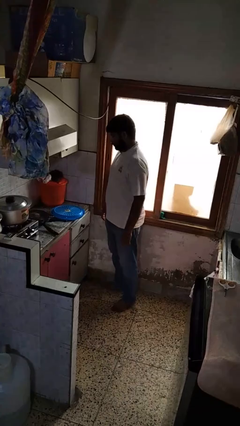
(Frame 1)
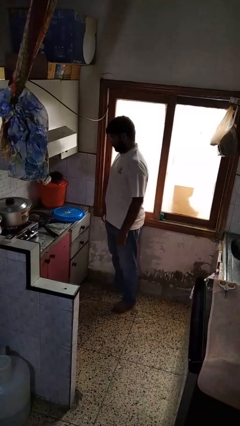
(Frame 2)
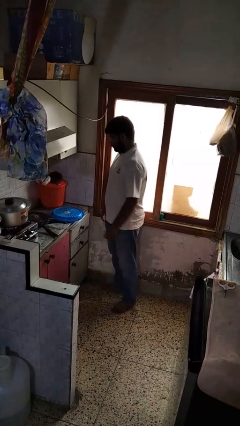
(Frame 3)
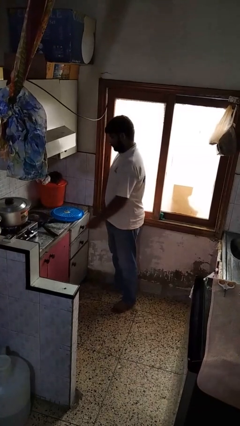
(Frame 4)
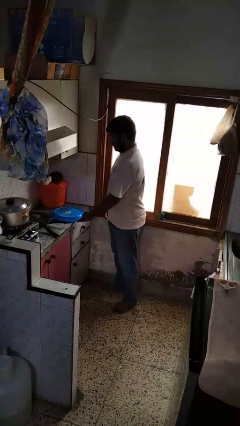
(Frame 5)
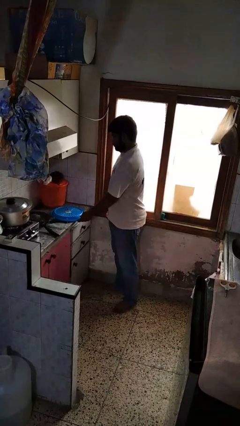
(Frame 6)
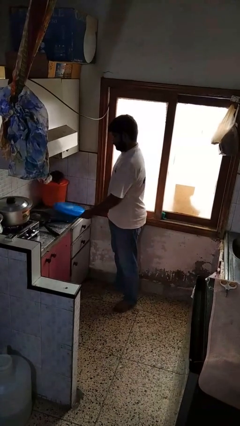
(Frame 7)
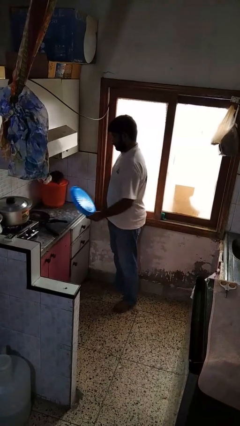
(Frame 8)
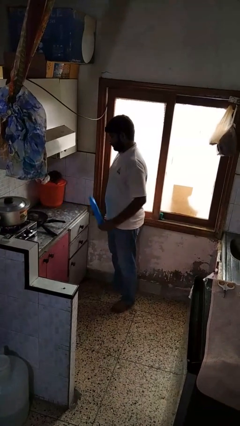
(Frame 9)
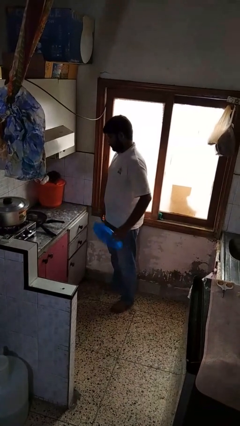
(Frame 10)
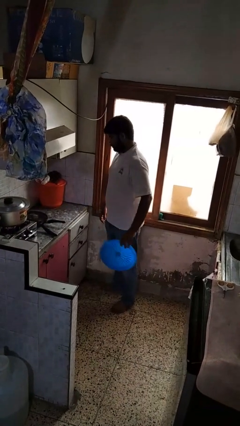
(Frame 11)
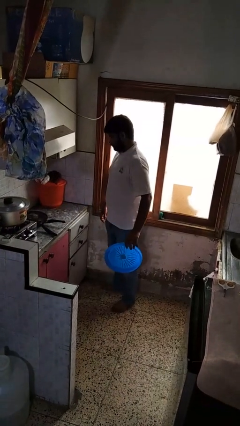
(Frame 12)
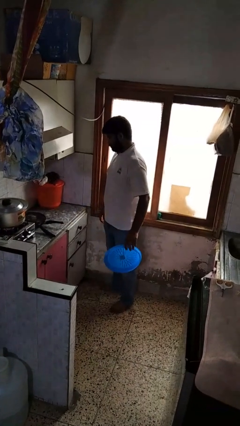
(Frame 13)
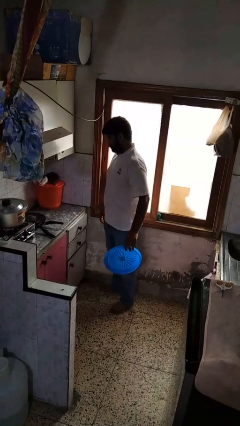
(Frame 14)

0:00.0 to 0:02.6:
person picks up object from countertop

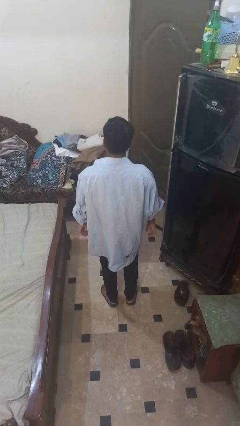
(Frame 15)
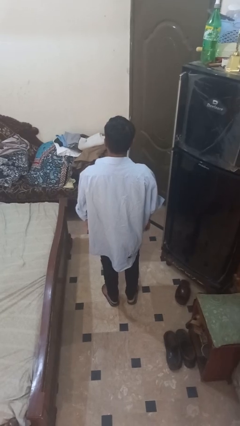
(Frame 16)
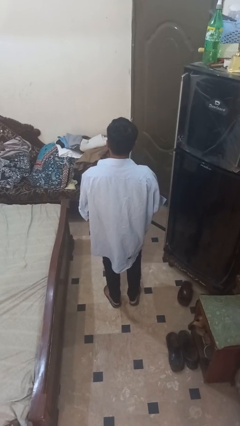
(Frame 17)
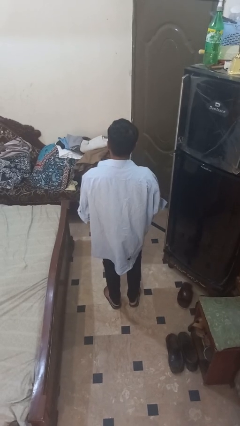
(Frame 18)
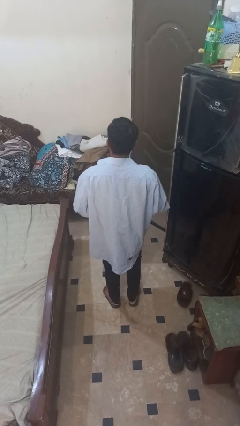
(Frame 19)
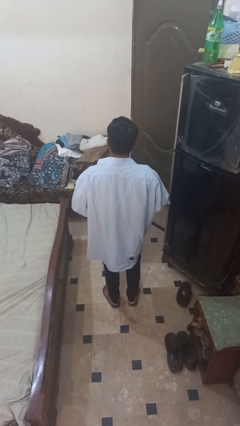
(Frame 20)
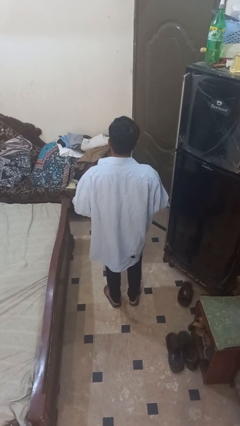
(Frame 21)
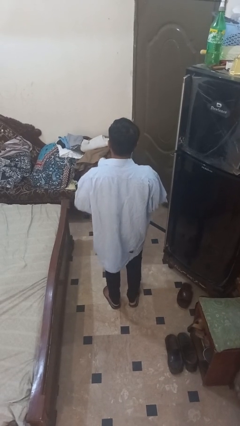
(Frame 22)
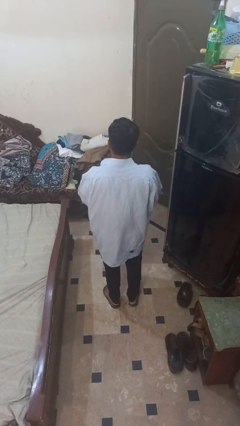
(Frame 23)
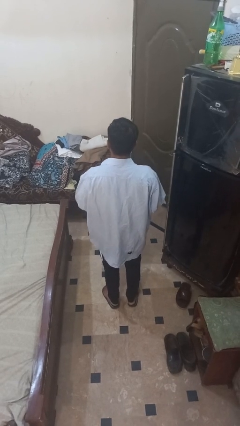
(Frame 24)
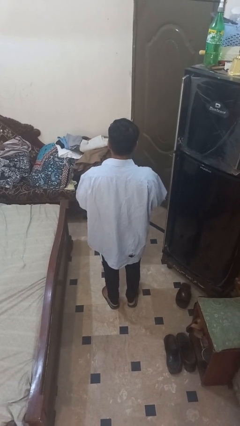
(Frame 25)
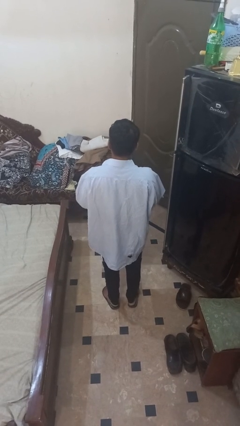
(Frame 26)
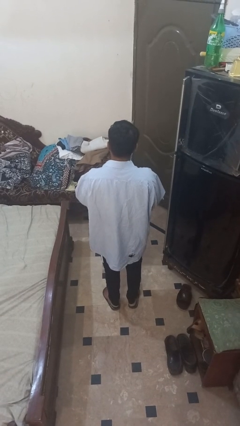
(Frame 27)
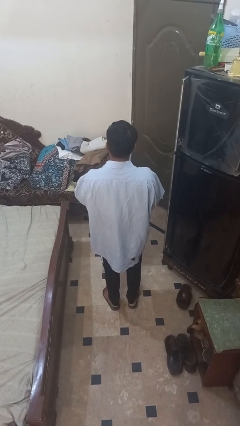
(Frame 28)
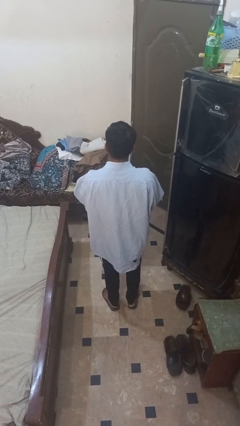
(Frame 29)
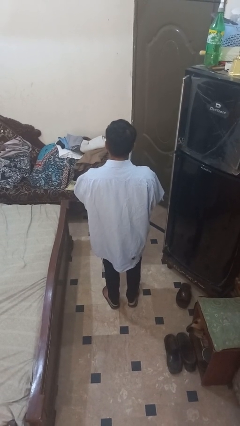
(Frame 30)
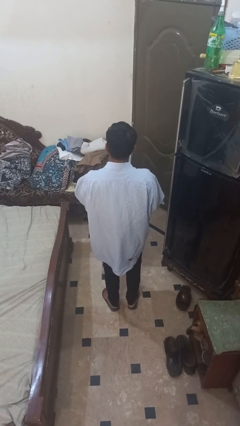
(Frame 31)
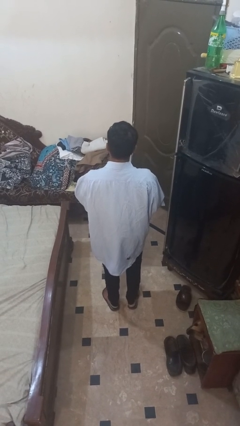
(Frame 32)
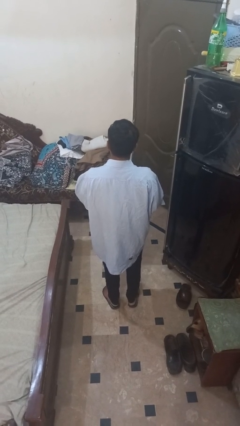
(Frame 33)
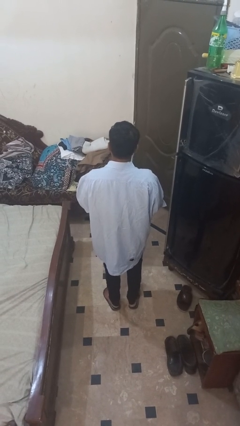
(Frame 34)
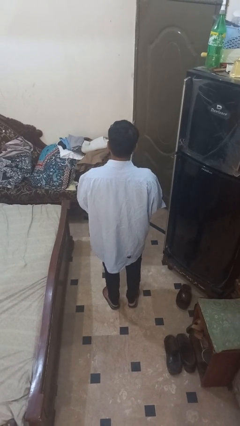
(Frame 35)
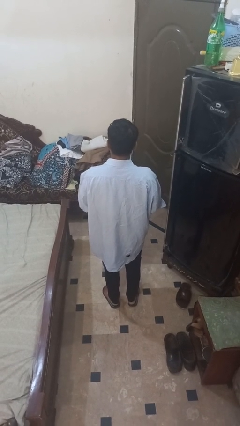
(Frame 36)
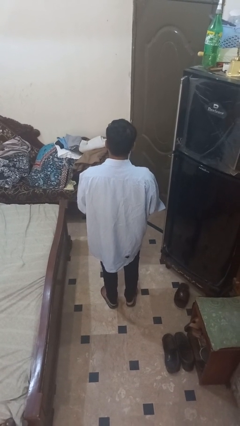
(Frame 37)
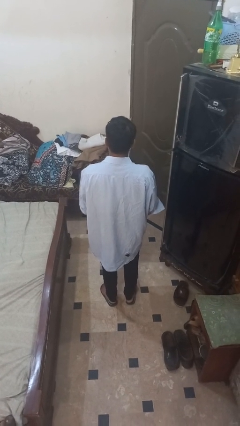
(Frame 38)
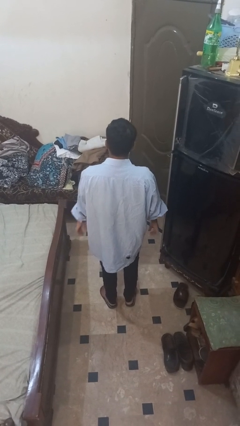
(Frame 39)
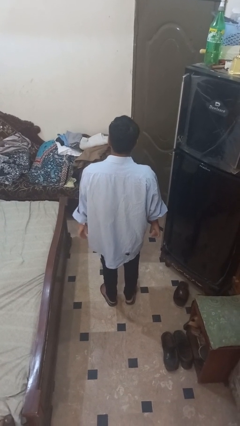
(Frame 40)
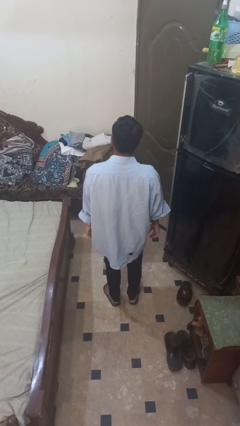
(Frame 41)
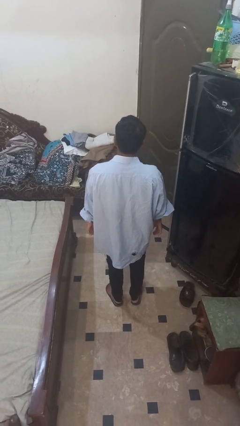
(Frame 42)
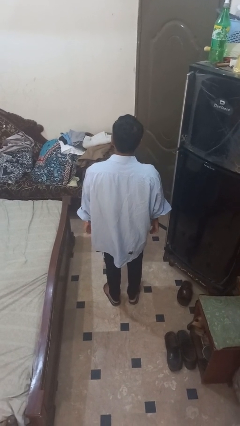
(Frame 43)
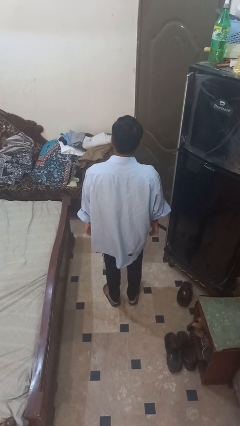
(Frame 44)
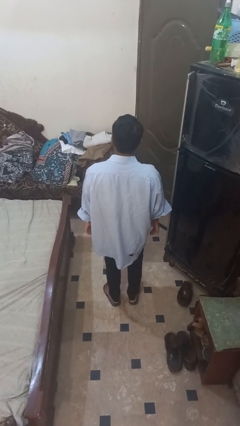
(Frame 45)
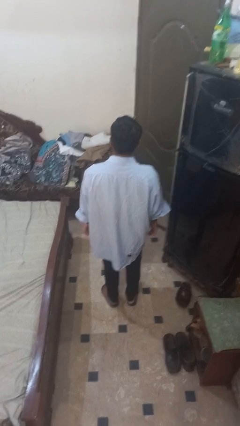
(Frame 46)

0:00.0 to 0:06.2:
person buttons shirt

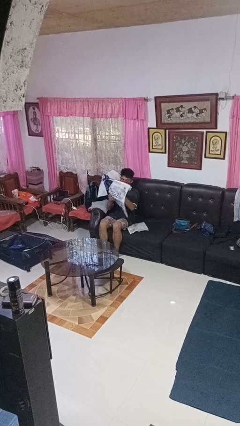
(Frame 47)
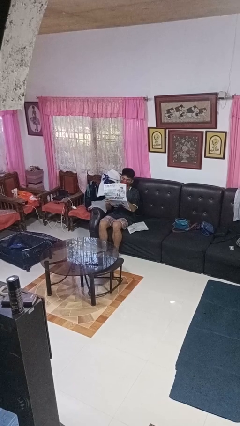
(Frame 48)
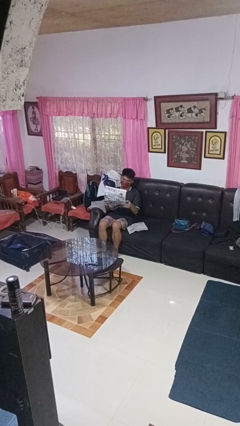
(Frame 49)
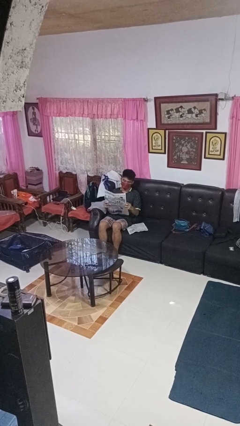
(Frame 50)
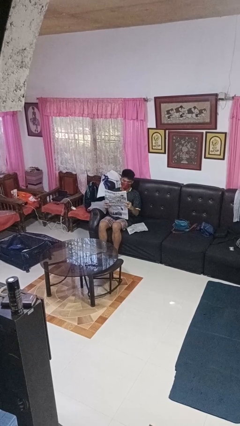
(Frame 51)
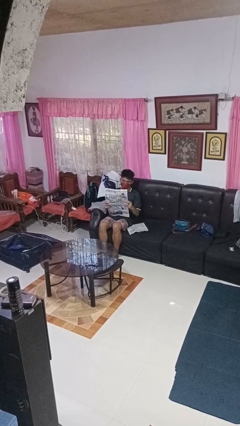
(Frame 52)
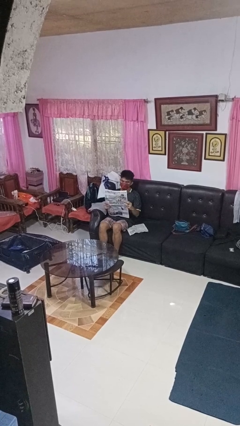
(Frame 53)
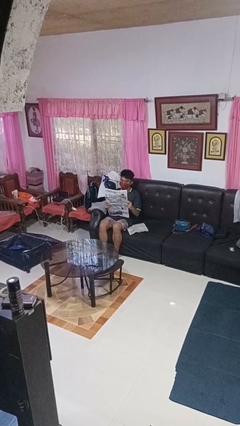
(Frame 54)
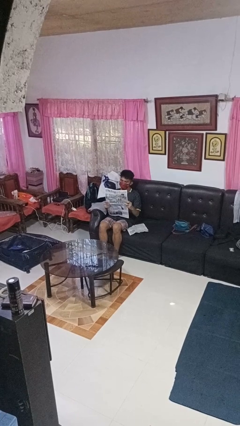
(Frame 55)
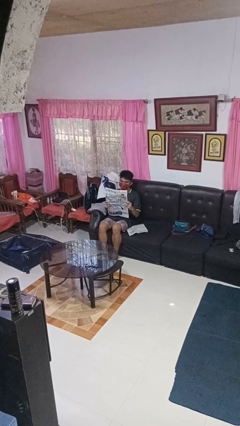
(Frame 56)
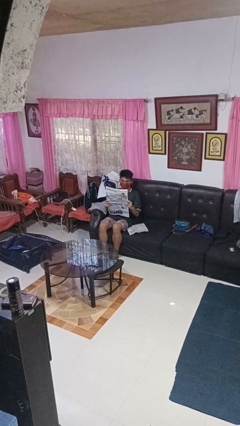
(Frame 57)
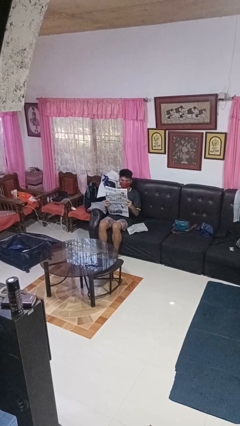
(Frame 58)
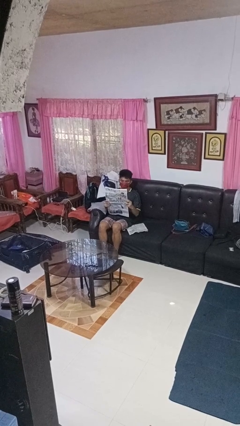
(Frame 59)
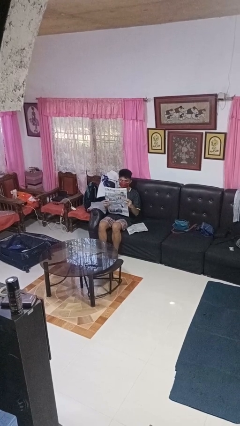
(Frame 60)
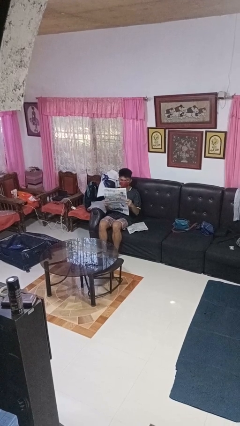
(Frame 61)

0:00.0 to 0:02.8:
person reads newspaper

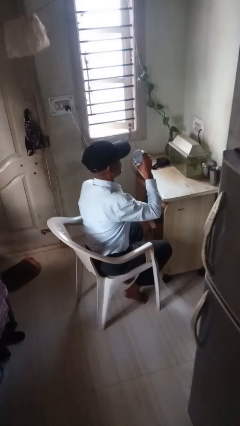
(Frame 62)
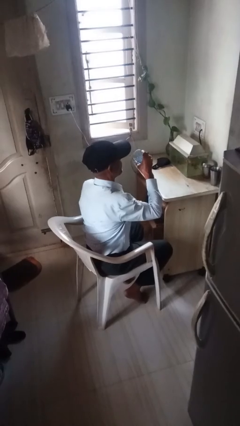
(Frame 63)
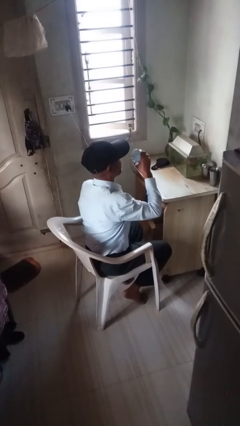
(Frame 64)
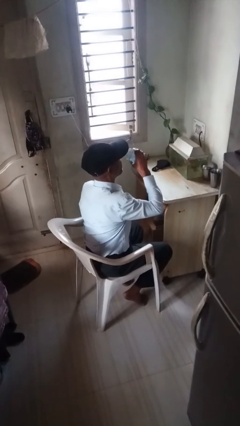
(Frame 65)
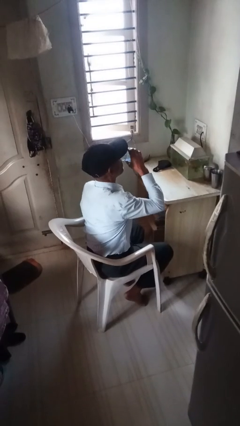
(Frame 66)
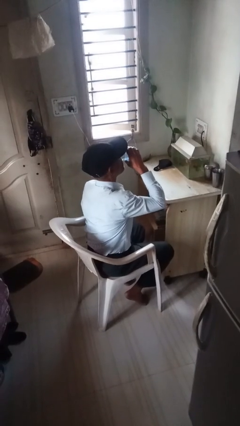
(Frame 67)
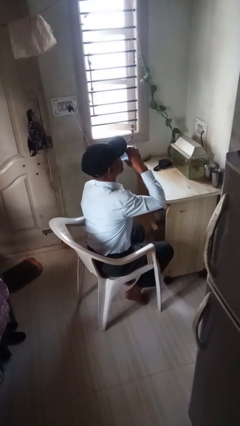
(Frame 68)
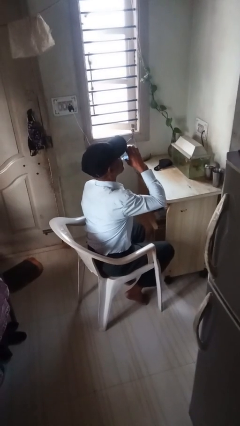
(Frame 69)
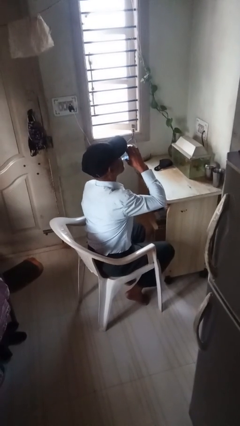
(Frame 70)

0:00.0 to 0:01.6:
person drinks from shotglass

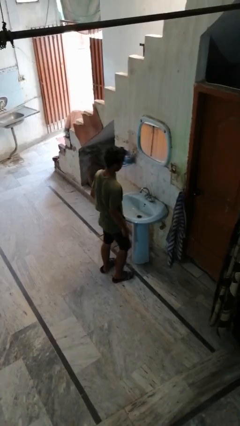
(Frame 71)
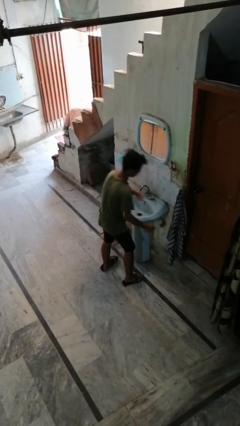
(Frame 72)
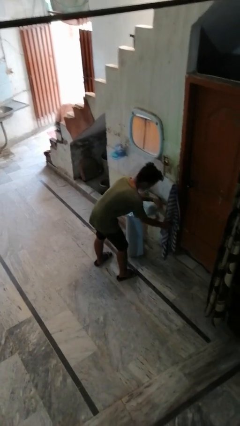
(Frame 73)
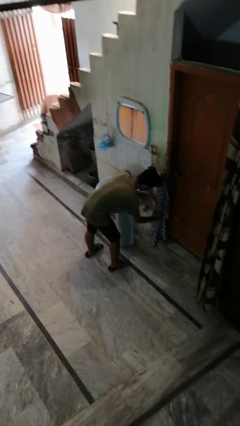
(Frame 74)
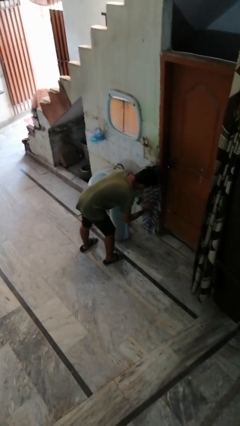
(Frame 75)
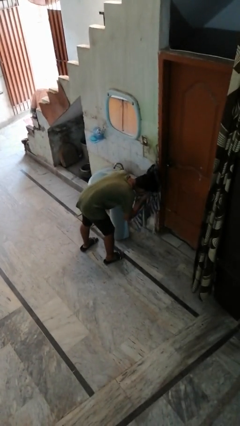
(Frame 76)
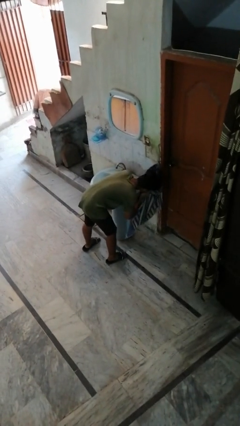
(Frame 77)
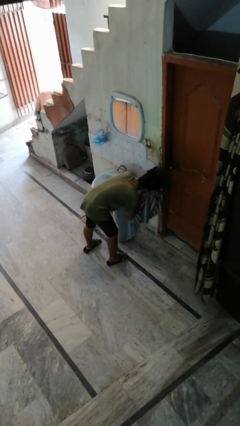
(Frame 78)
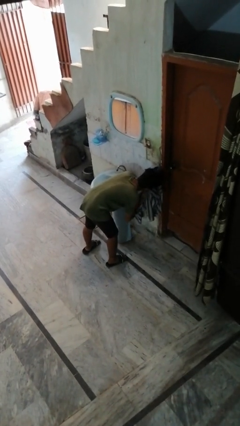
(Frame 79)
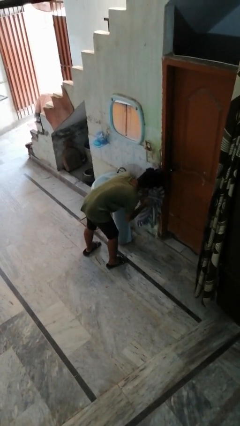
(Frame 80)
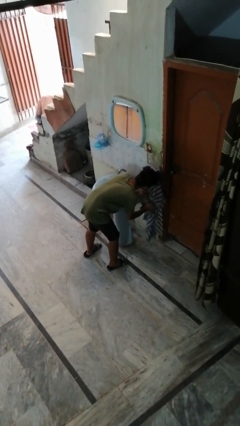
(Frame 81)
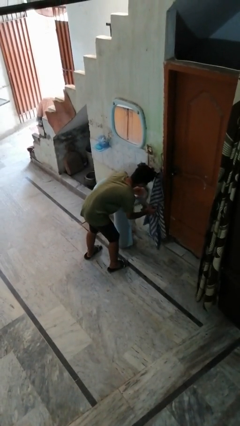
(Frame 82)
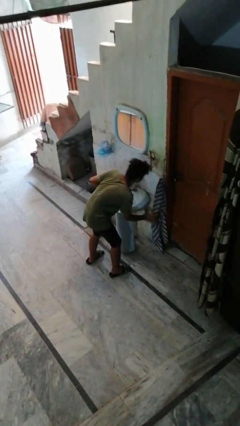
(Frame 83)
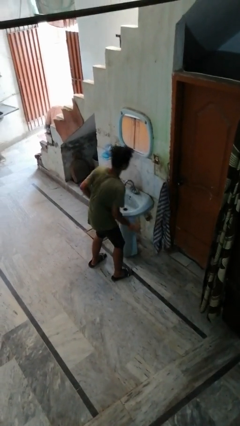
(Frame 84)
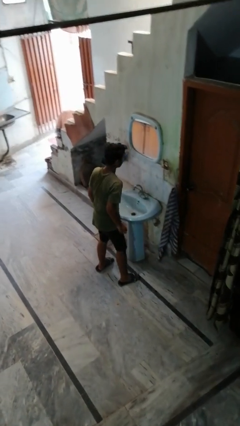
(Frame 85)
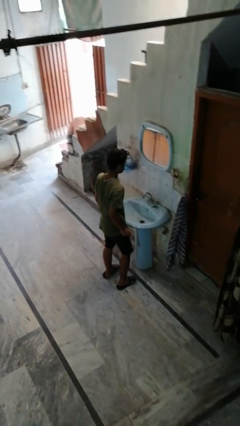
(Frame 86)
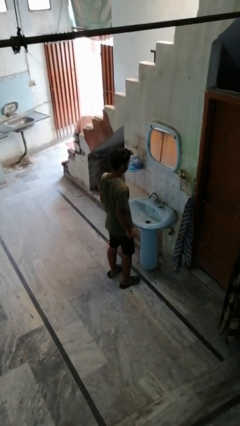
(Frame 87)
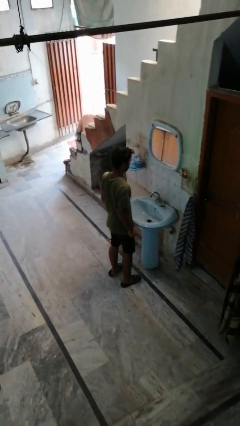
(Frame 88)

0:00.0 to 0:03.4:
person dries face with towel

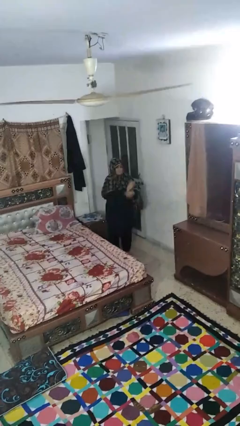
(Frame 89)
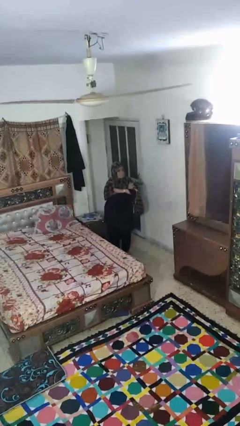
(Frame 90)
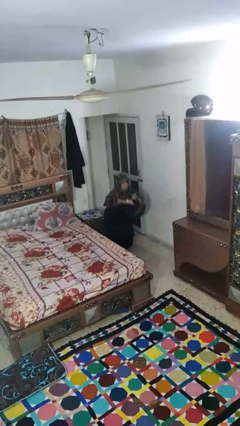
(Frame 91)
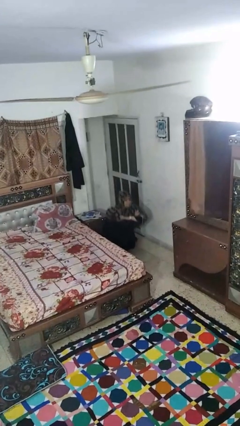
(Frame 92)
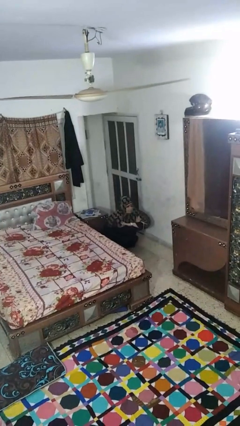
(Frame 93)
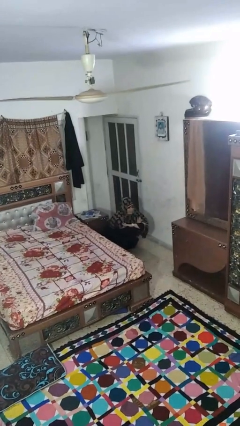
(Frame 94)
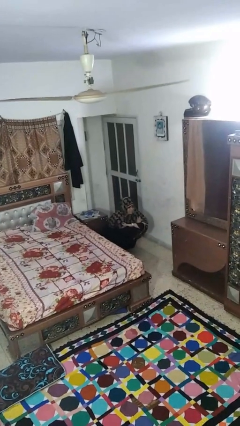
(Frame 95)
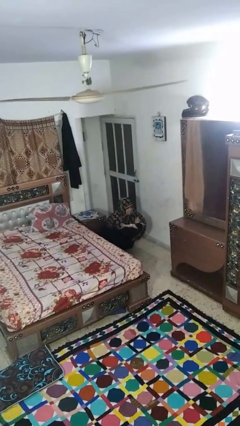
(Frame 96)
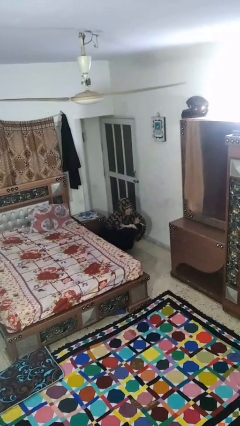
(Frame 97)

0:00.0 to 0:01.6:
person squats
